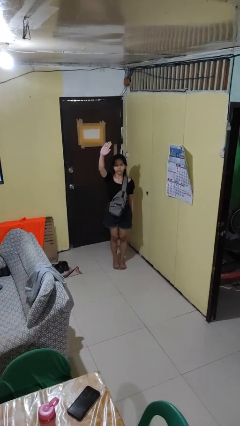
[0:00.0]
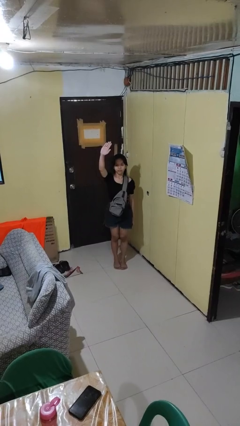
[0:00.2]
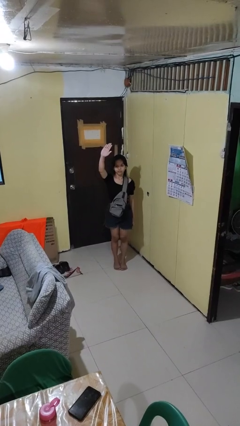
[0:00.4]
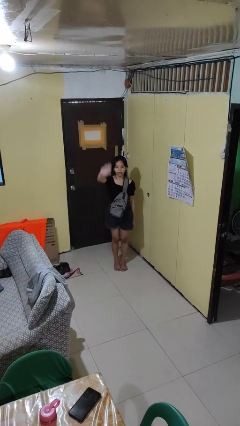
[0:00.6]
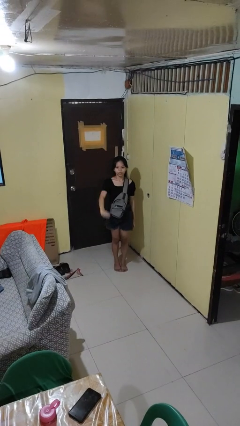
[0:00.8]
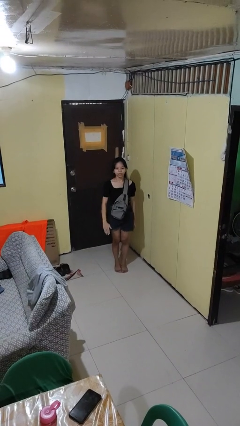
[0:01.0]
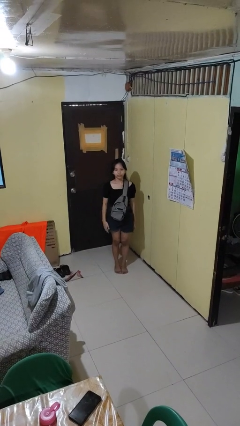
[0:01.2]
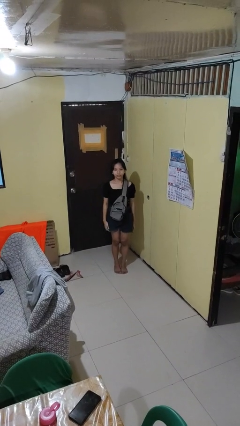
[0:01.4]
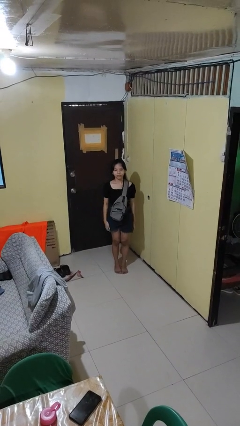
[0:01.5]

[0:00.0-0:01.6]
person gestures swipe down

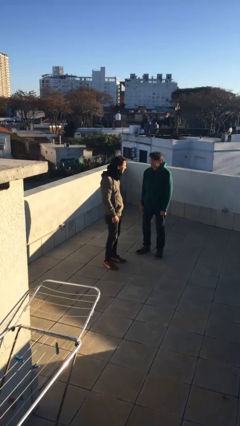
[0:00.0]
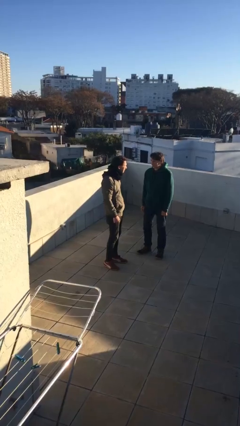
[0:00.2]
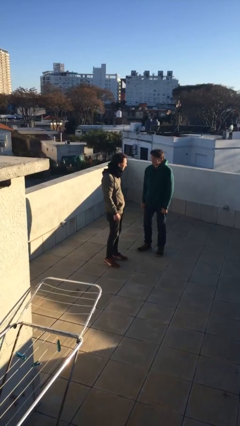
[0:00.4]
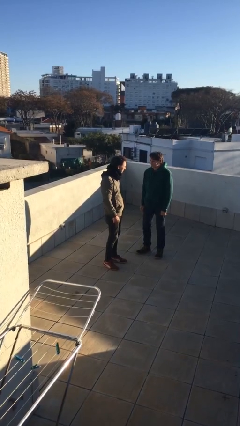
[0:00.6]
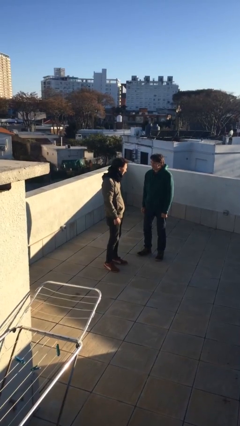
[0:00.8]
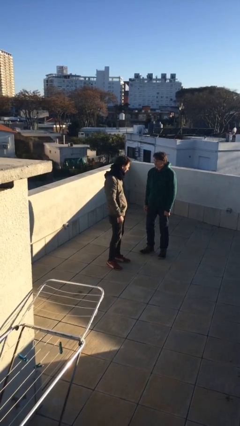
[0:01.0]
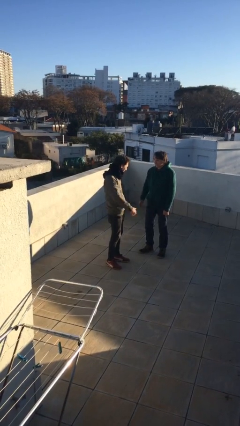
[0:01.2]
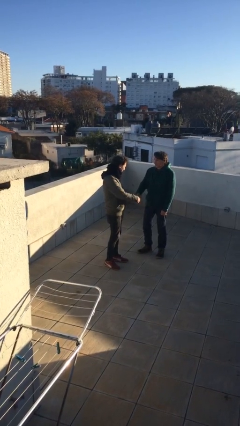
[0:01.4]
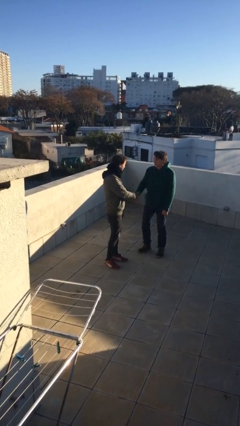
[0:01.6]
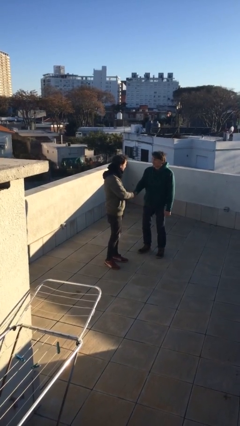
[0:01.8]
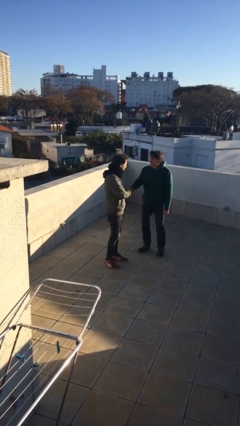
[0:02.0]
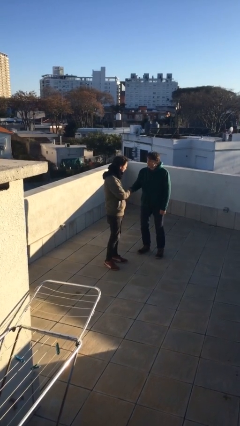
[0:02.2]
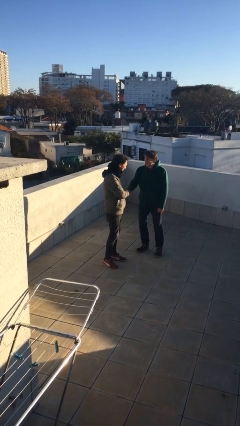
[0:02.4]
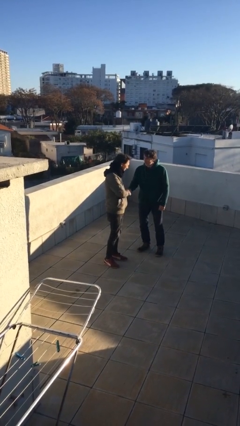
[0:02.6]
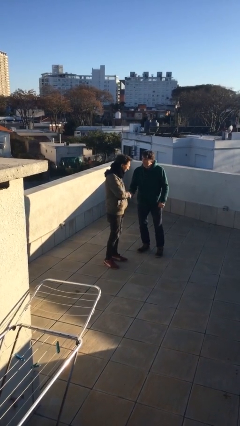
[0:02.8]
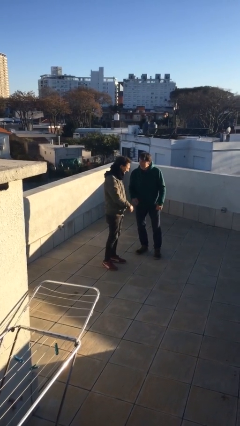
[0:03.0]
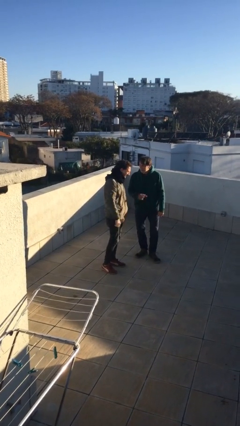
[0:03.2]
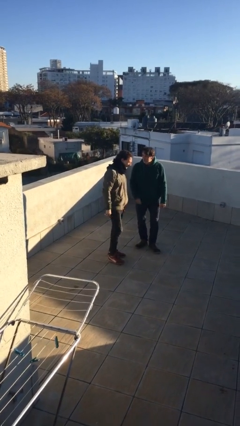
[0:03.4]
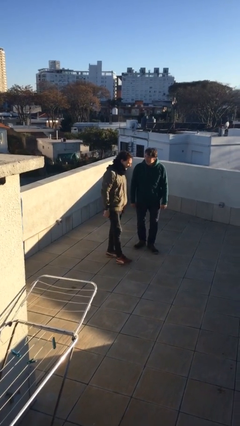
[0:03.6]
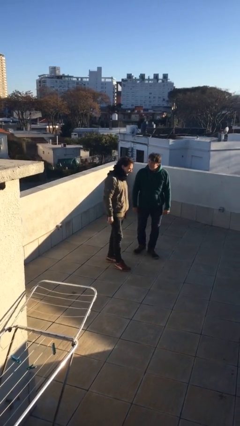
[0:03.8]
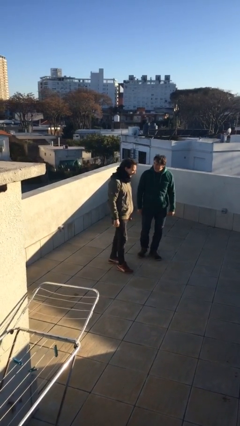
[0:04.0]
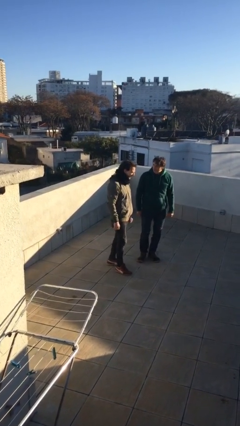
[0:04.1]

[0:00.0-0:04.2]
person shakes hand

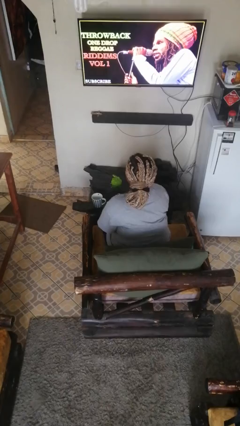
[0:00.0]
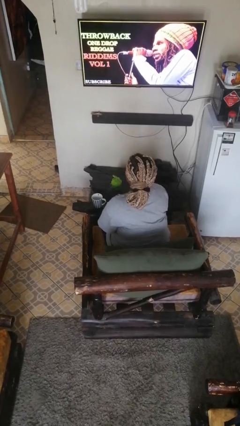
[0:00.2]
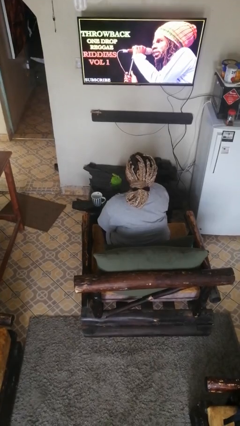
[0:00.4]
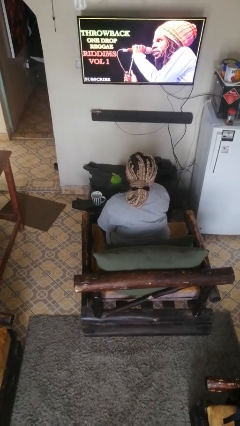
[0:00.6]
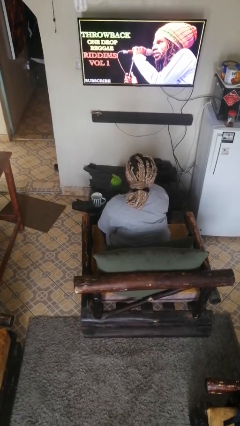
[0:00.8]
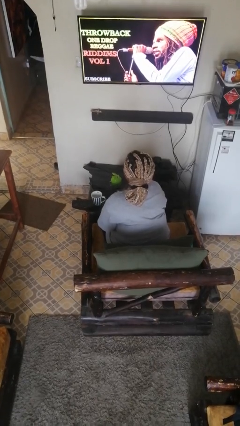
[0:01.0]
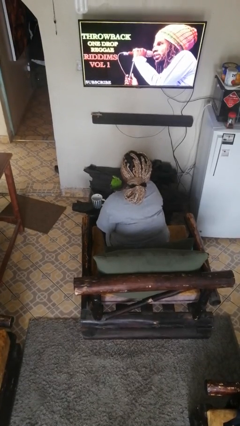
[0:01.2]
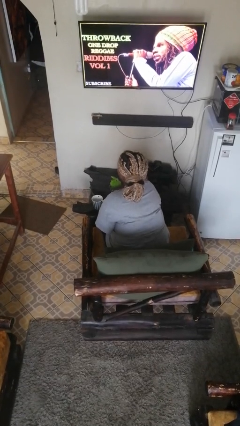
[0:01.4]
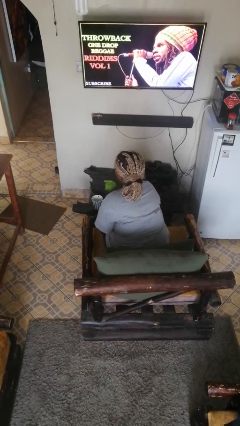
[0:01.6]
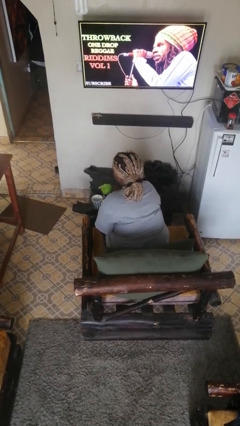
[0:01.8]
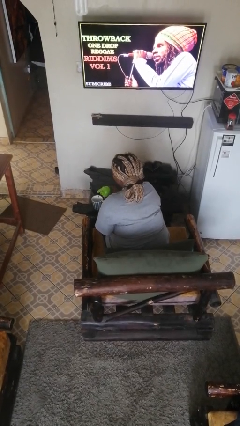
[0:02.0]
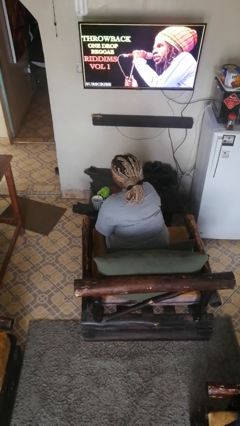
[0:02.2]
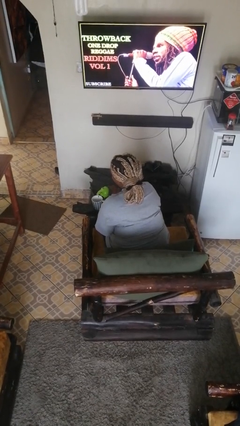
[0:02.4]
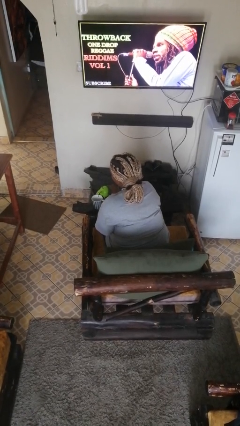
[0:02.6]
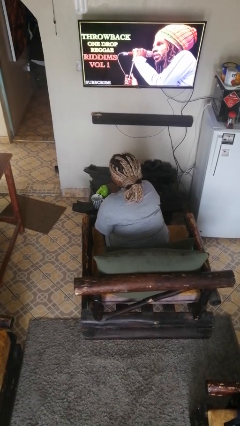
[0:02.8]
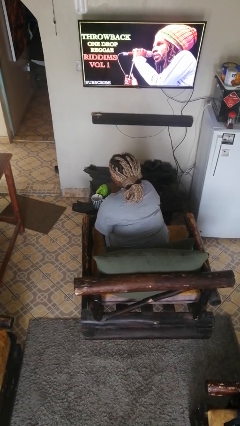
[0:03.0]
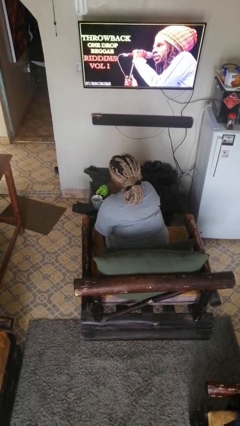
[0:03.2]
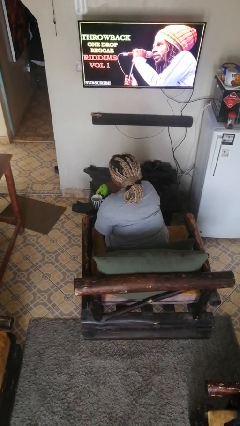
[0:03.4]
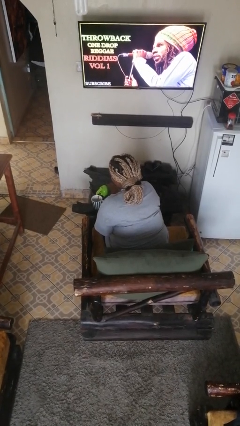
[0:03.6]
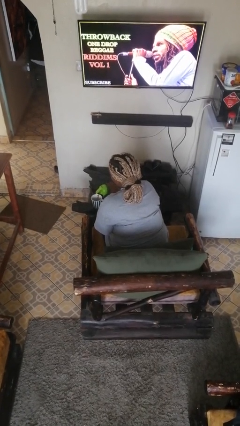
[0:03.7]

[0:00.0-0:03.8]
person pours coffee into mug

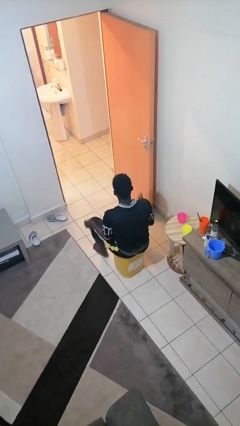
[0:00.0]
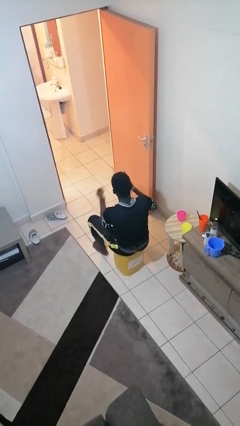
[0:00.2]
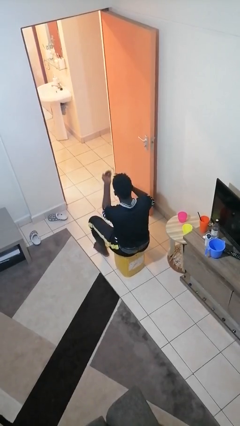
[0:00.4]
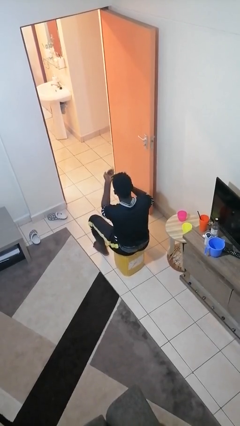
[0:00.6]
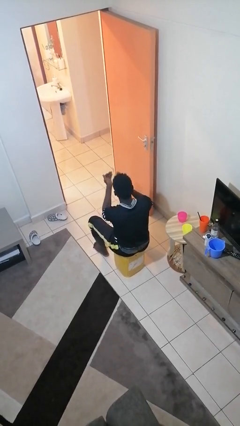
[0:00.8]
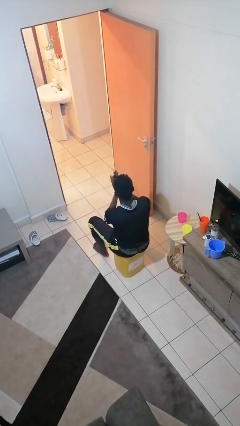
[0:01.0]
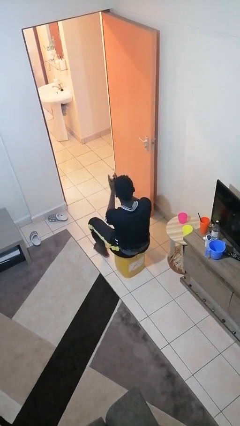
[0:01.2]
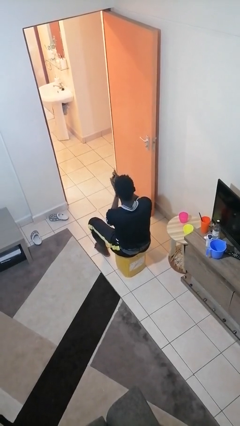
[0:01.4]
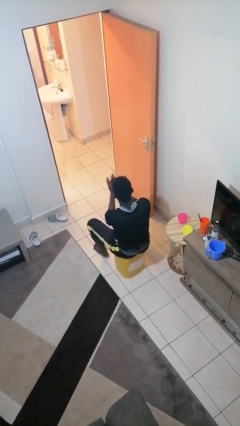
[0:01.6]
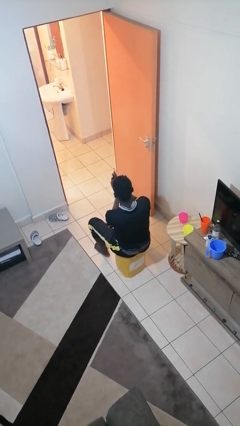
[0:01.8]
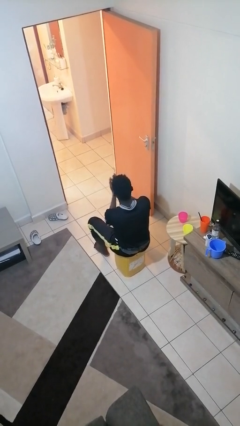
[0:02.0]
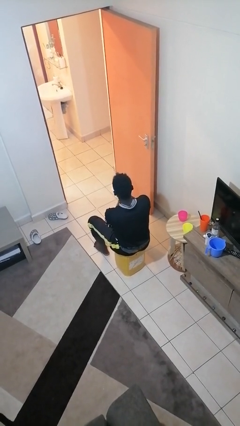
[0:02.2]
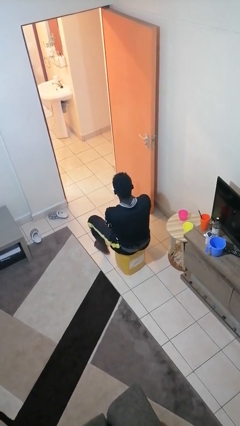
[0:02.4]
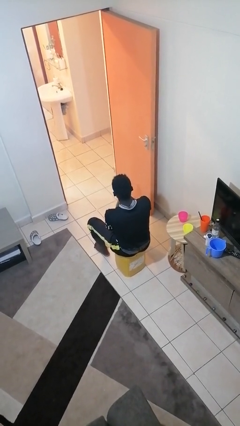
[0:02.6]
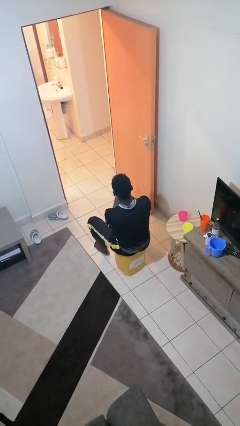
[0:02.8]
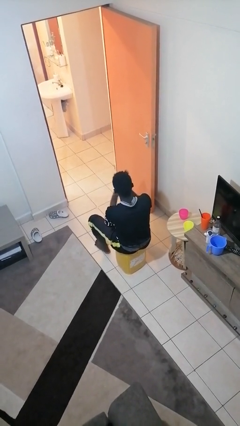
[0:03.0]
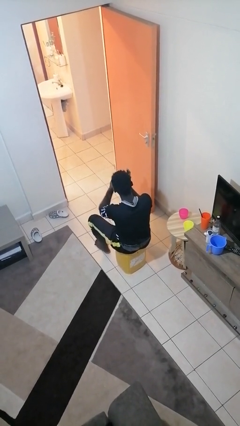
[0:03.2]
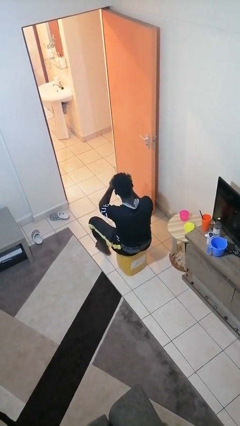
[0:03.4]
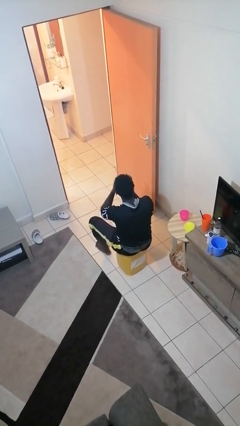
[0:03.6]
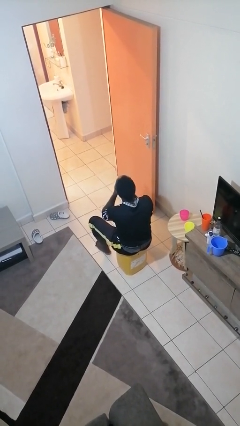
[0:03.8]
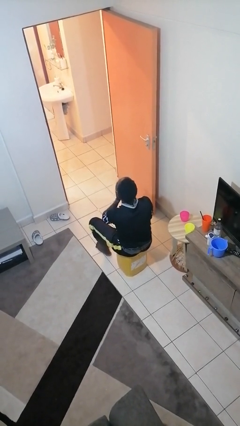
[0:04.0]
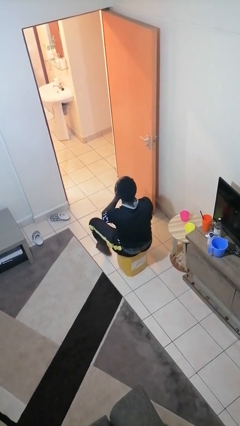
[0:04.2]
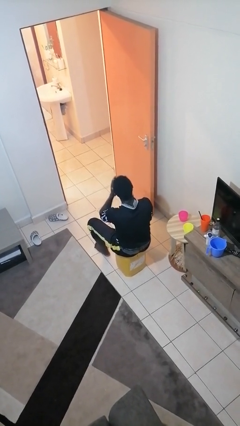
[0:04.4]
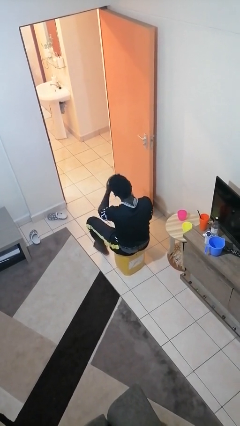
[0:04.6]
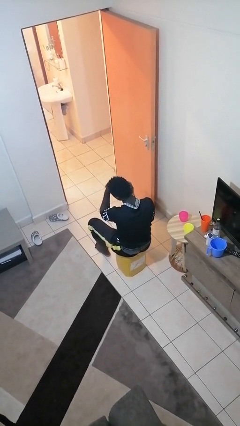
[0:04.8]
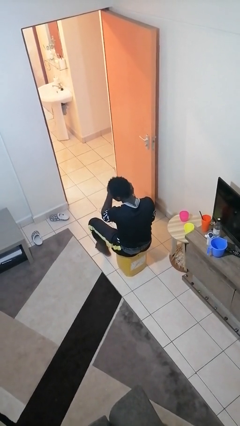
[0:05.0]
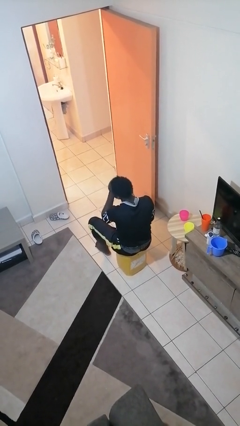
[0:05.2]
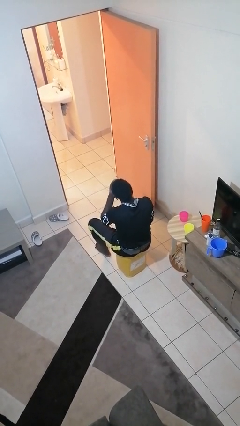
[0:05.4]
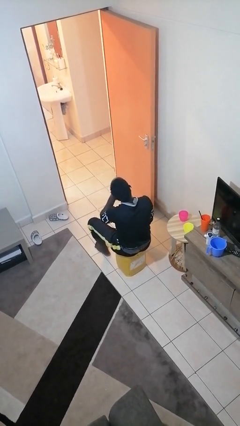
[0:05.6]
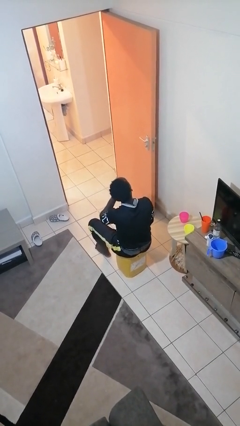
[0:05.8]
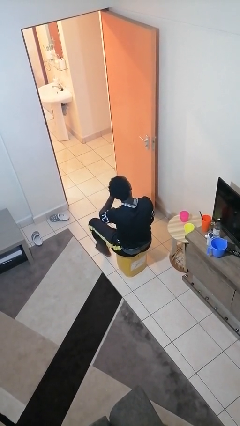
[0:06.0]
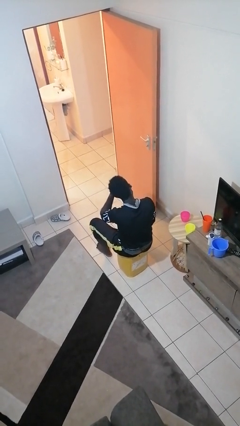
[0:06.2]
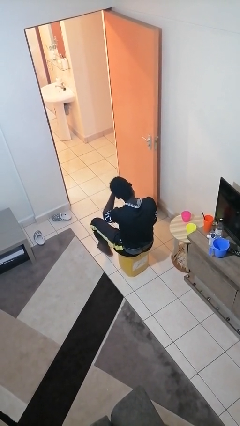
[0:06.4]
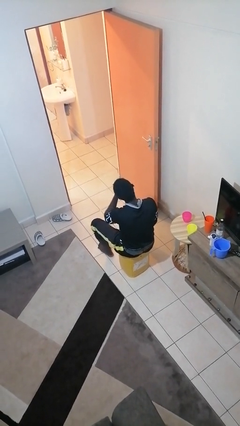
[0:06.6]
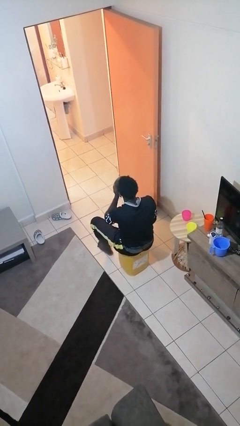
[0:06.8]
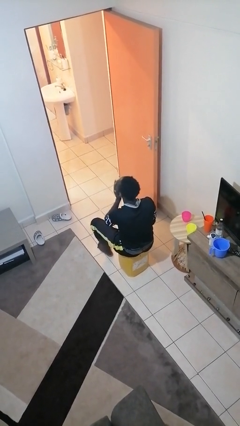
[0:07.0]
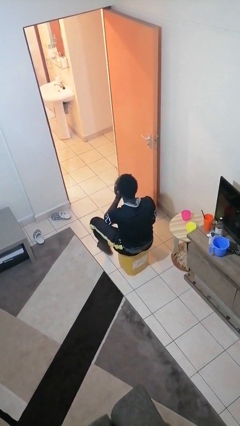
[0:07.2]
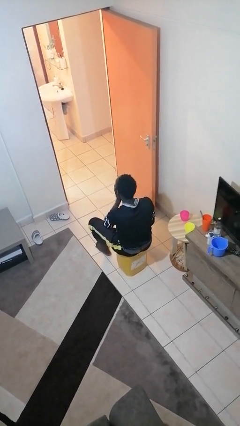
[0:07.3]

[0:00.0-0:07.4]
person applies sunscreen

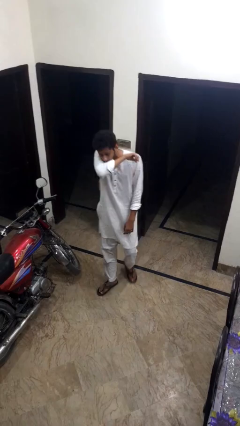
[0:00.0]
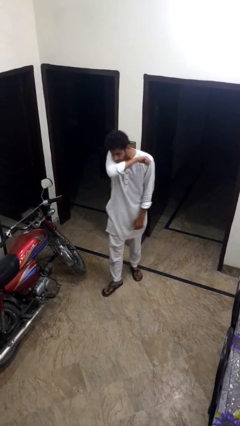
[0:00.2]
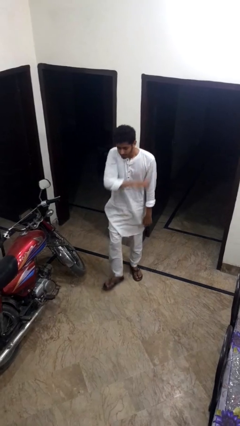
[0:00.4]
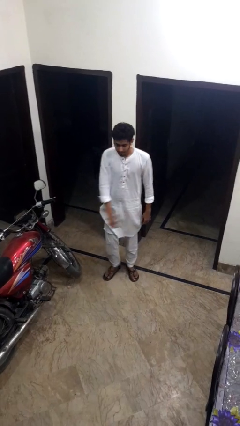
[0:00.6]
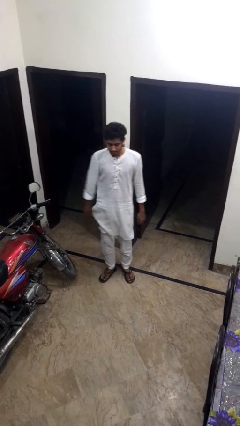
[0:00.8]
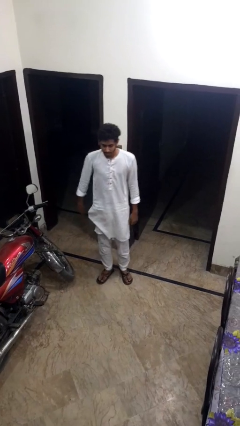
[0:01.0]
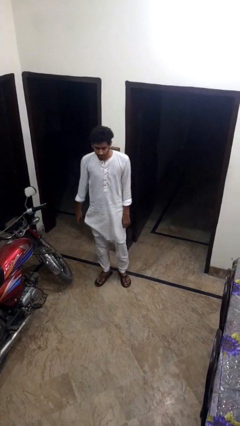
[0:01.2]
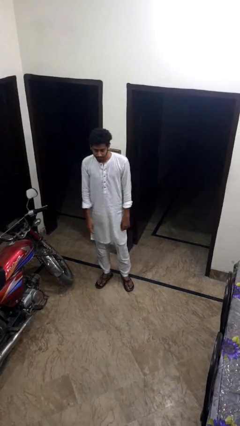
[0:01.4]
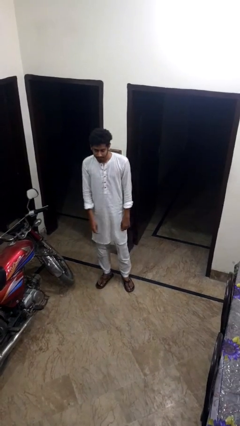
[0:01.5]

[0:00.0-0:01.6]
person sneezes into arm
